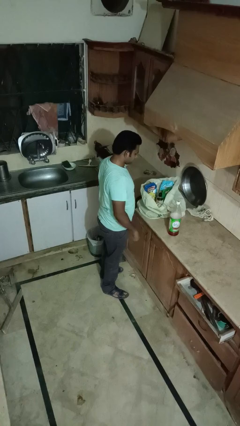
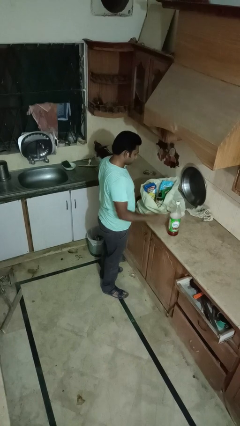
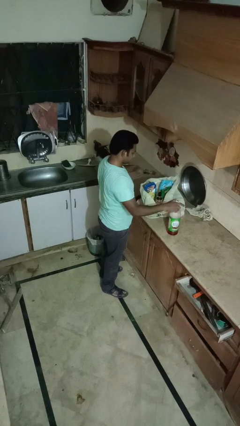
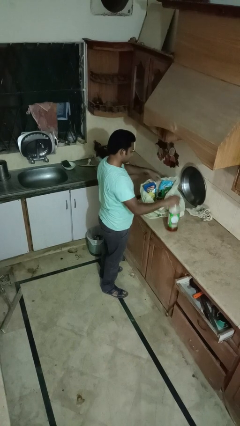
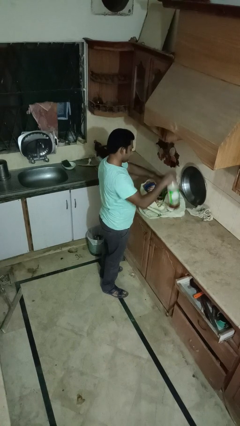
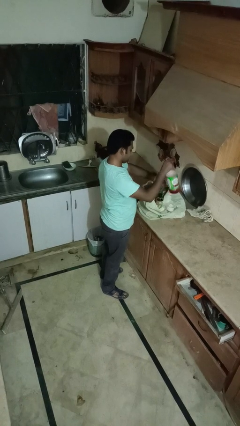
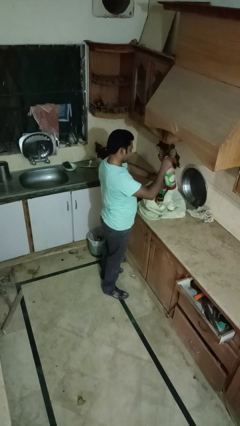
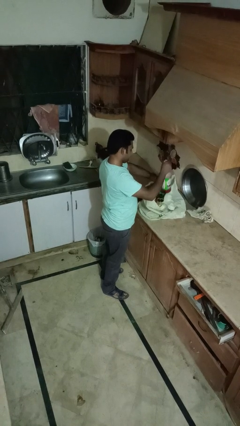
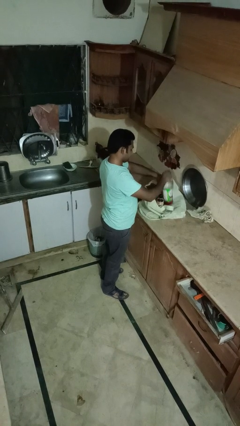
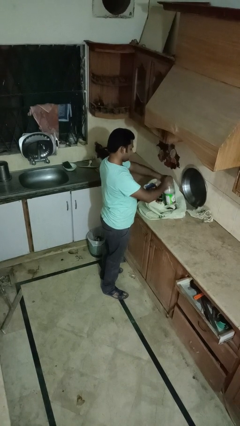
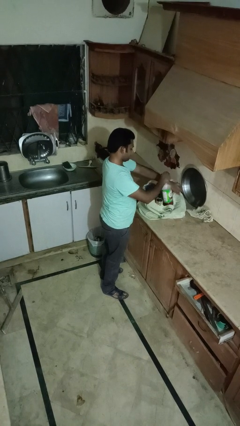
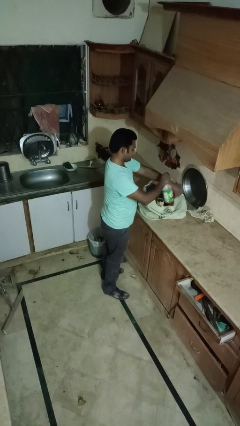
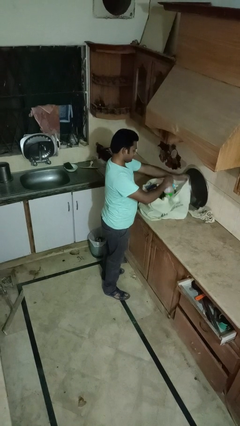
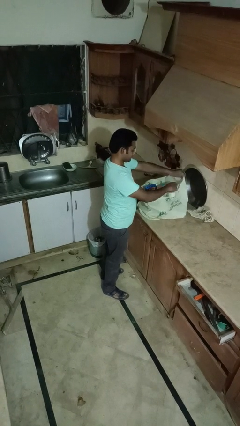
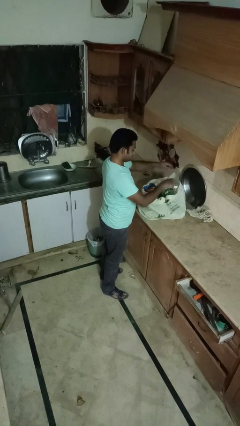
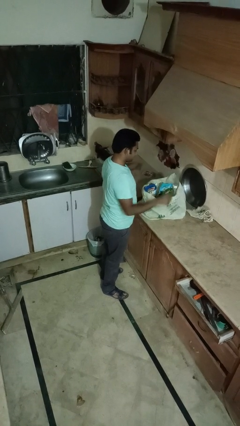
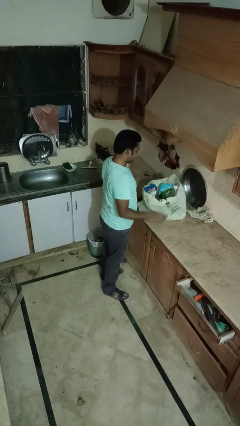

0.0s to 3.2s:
person puts object into bag

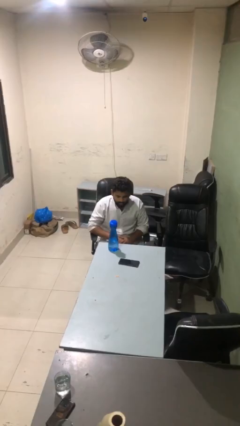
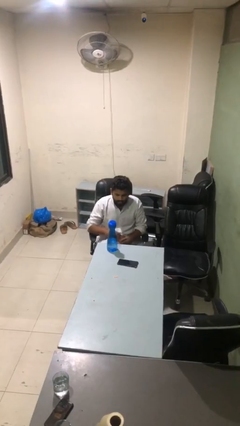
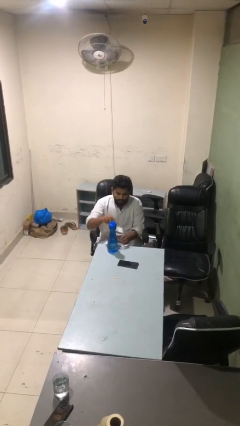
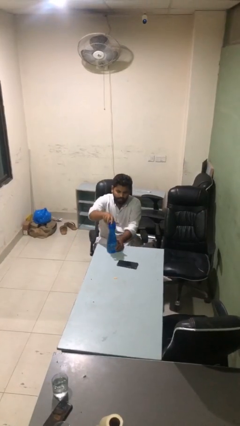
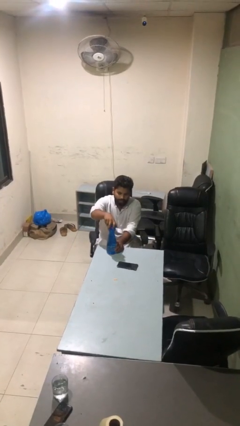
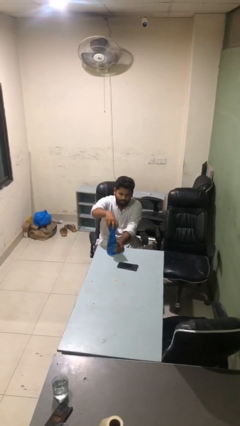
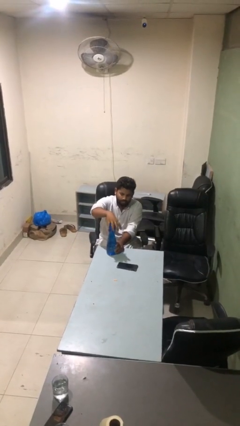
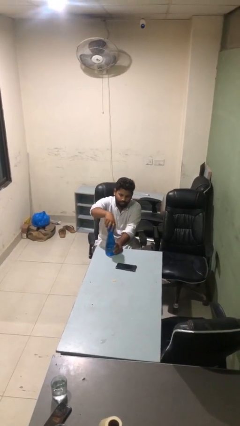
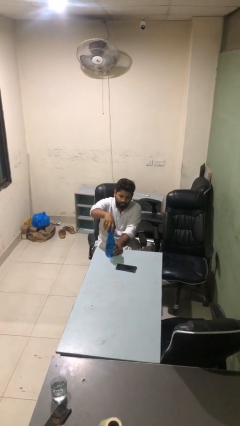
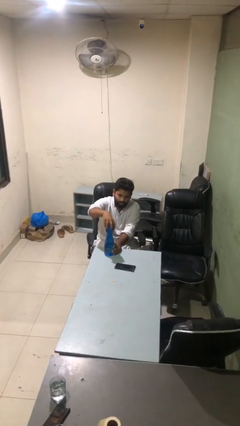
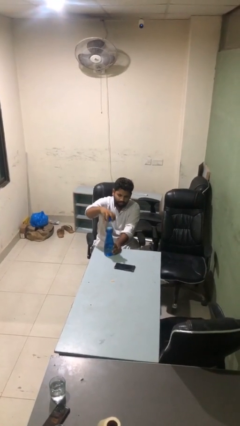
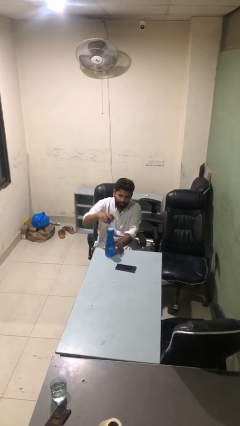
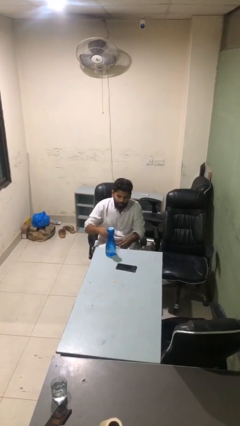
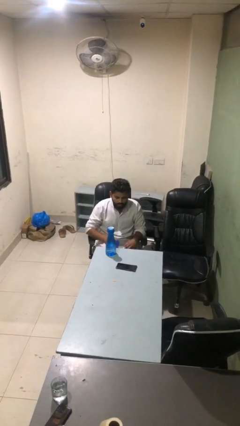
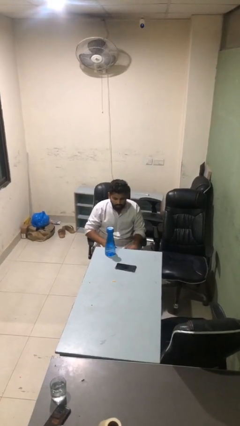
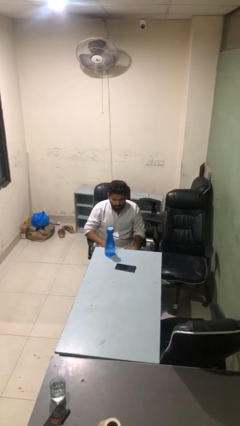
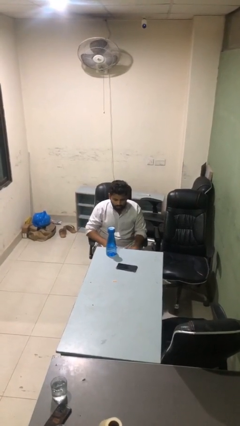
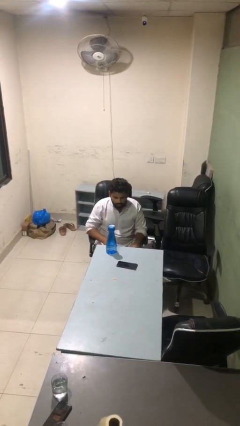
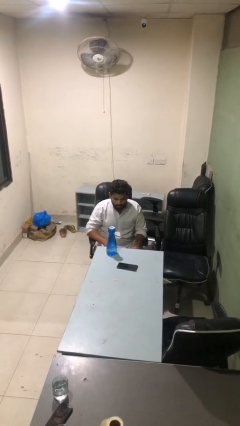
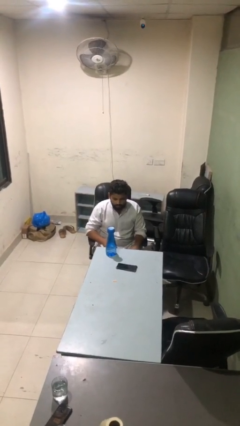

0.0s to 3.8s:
person unscrews lid from bottle

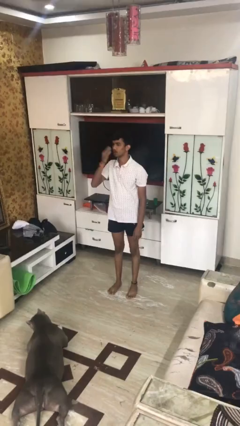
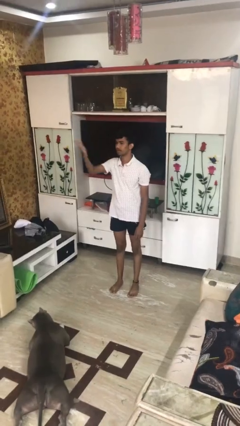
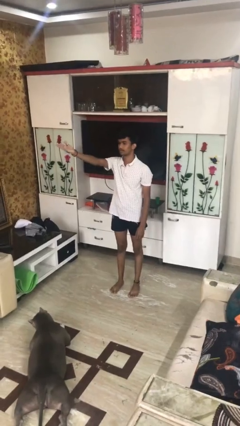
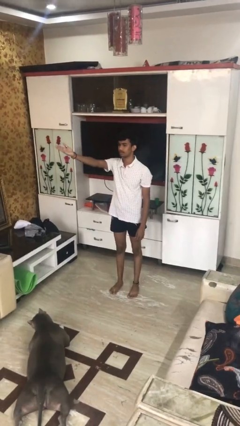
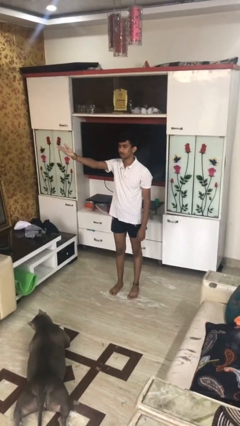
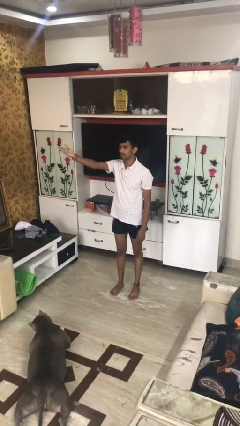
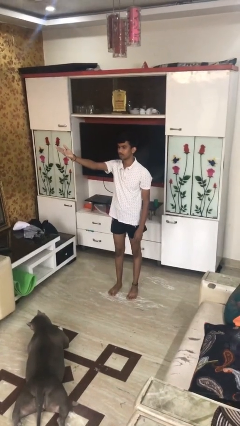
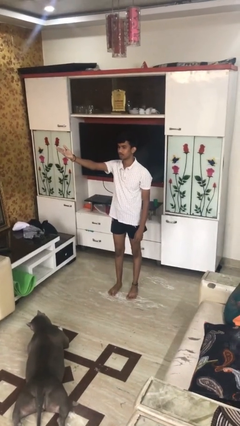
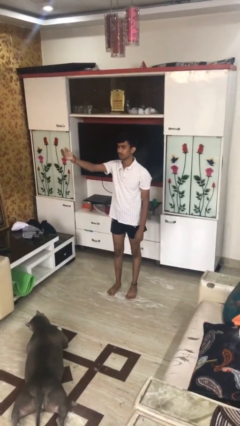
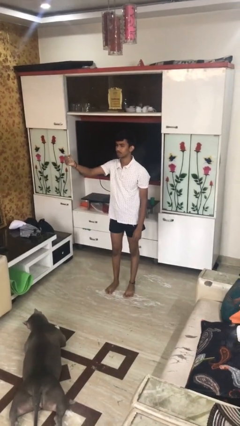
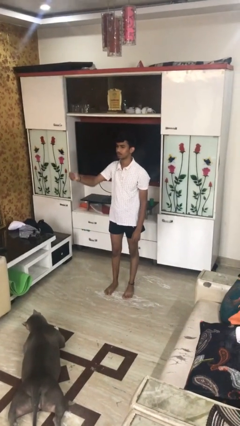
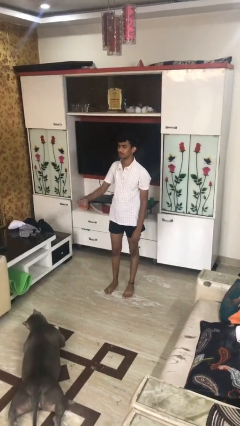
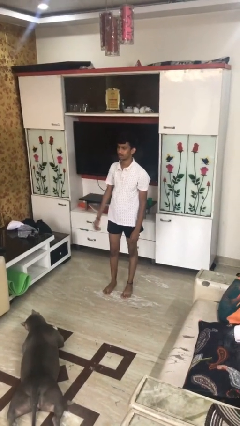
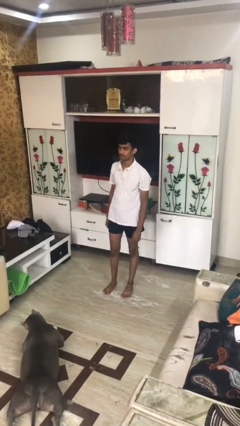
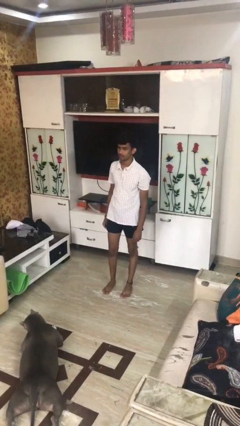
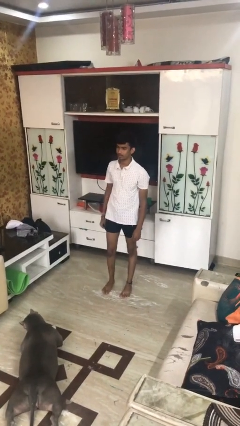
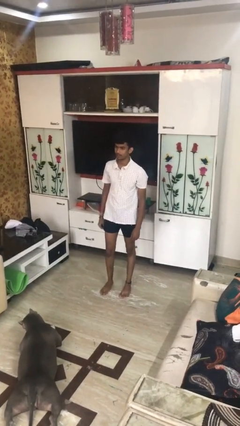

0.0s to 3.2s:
person gestures blow kiss

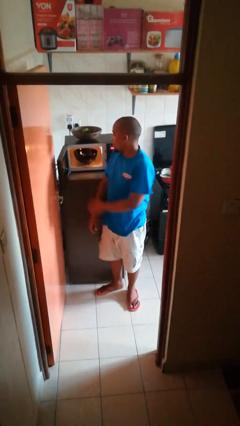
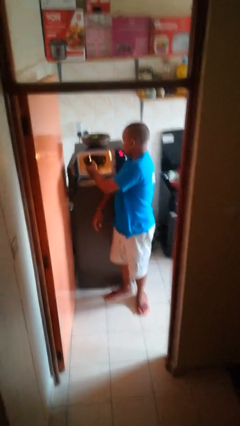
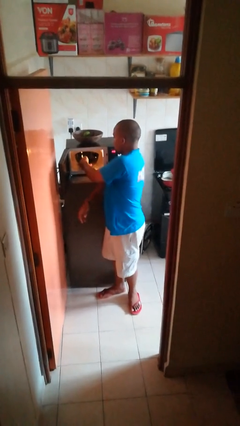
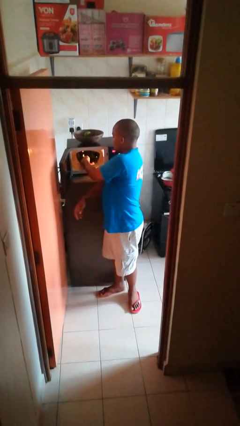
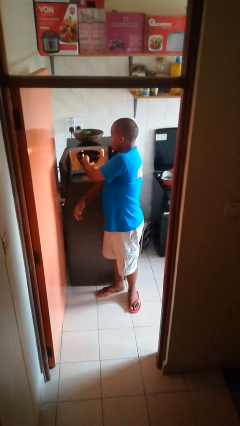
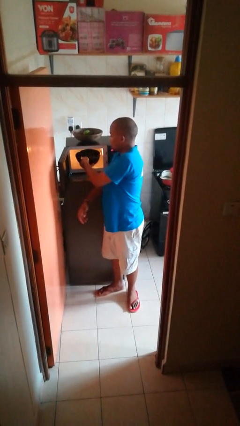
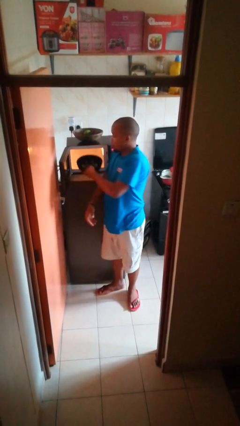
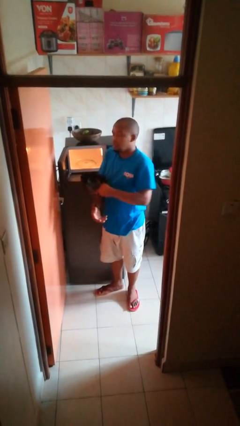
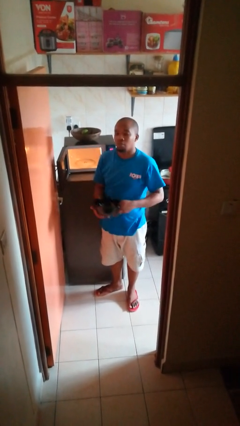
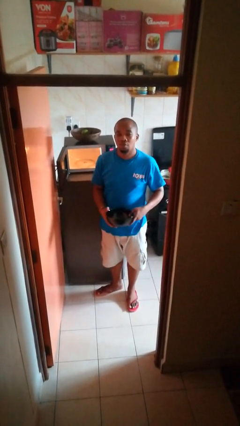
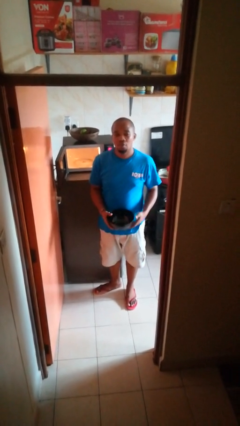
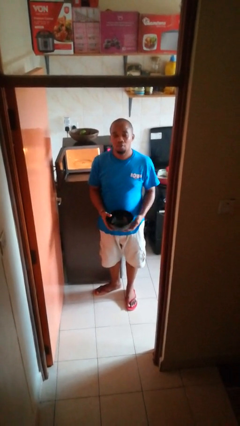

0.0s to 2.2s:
person takes object from microwave

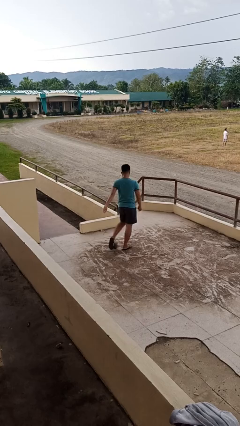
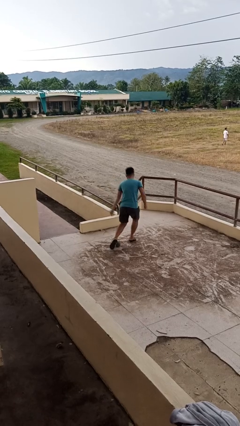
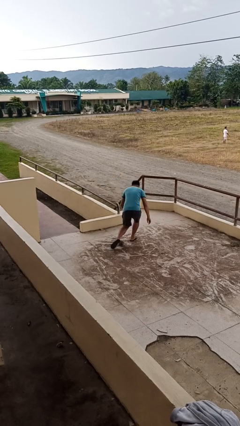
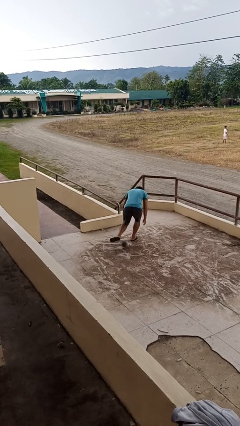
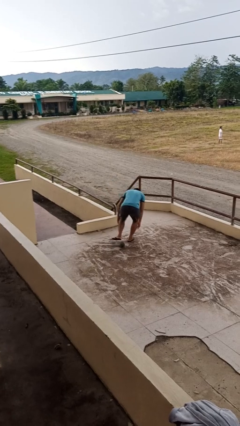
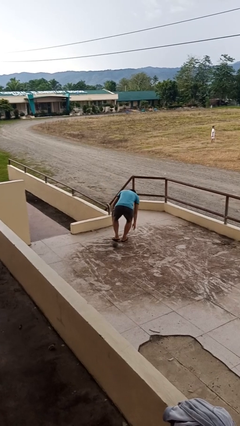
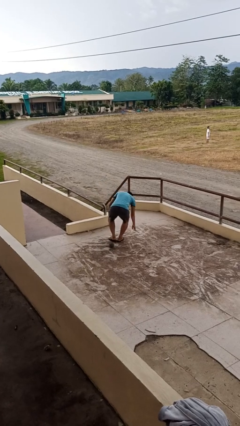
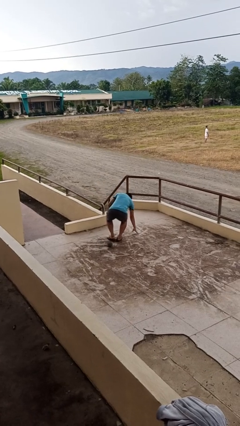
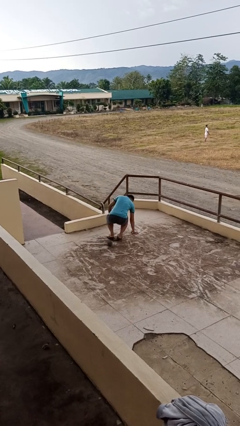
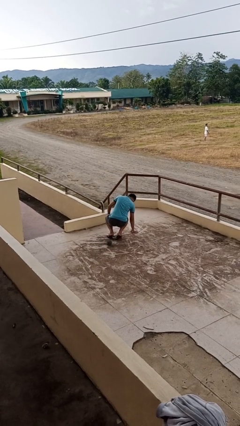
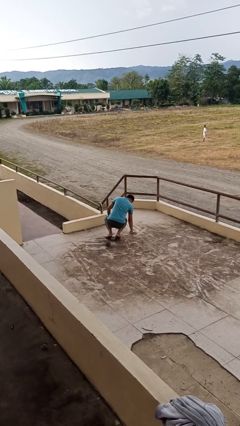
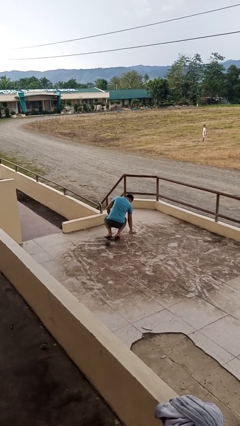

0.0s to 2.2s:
person lies down on floor

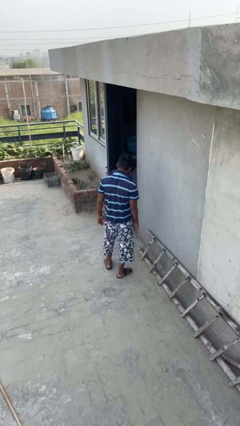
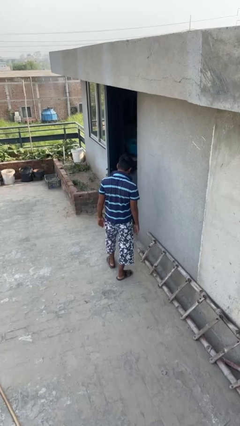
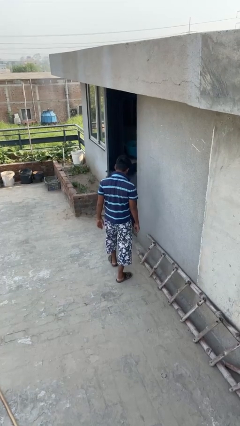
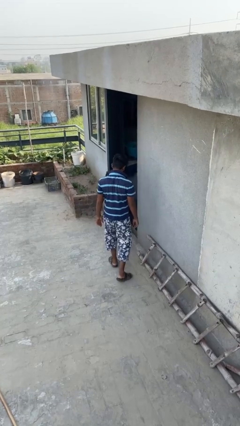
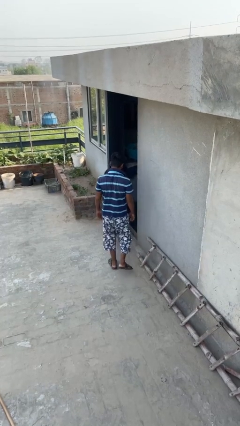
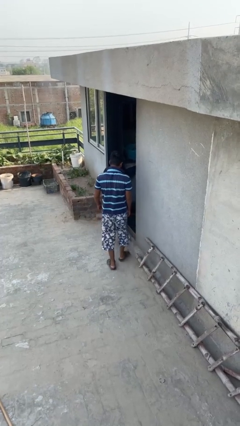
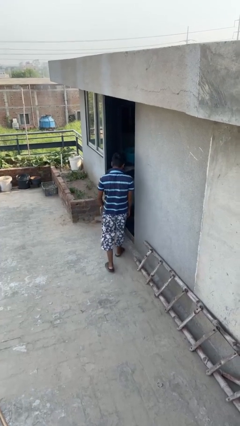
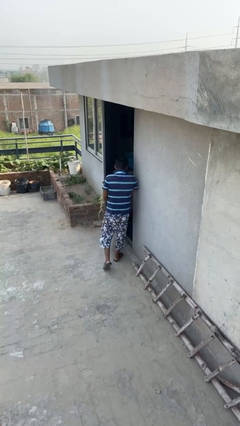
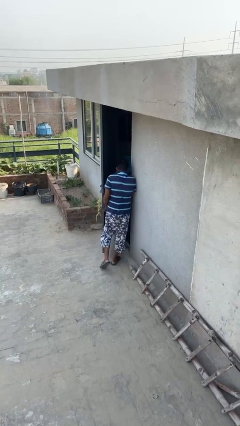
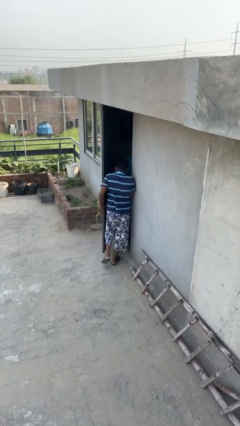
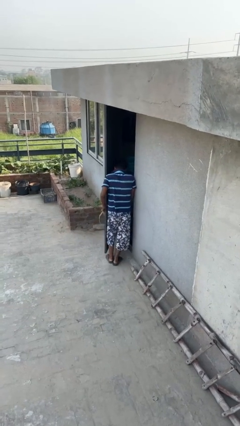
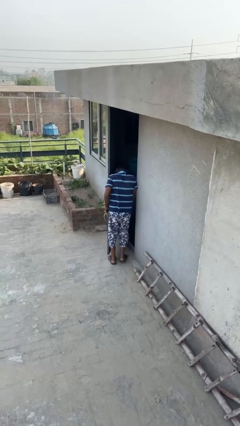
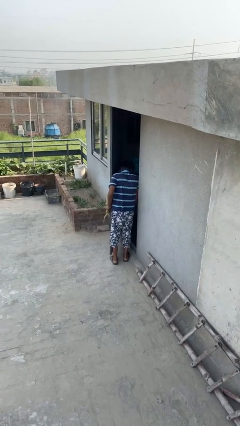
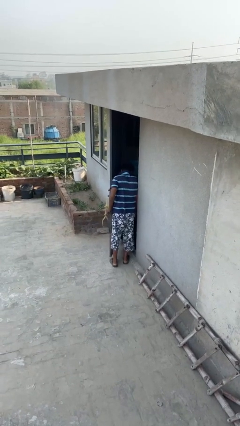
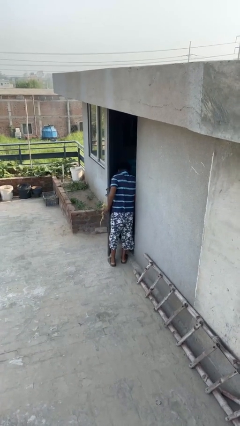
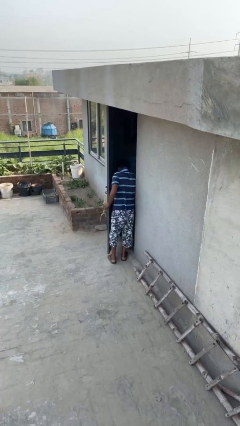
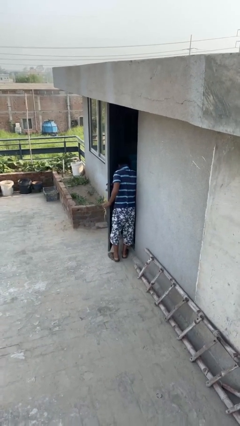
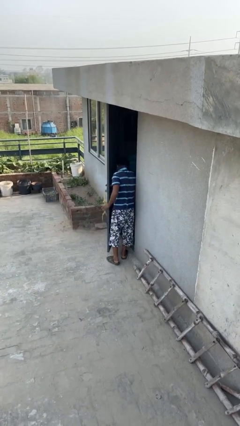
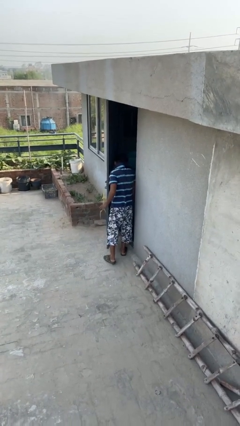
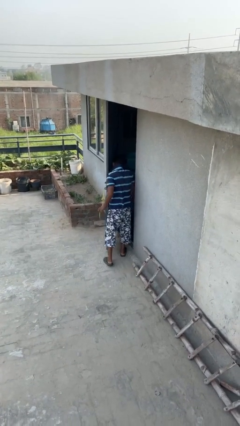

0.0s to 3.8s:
person bumps into wall
